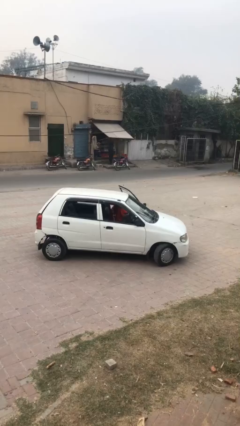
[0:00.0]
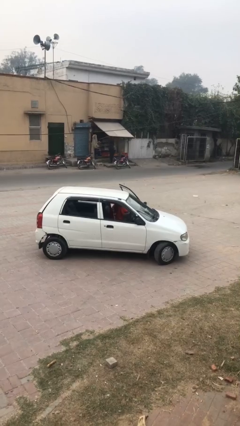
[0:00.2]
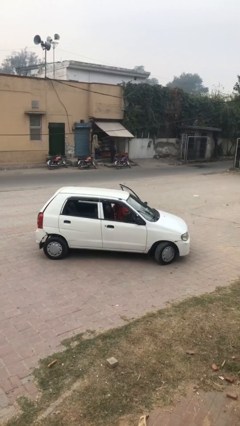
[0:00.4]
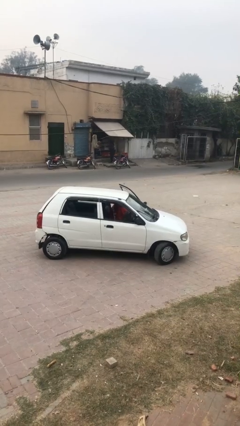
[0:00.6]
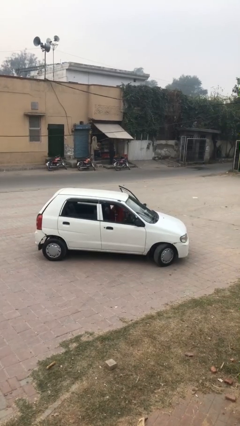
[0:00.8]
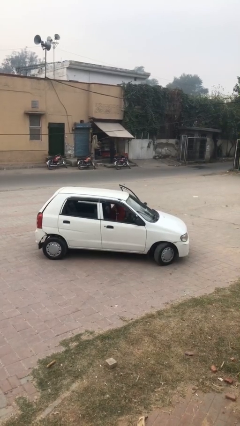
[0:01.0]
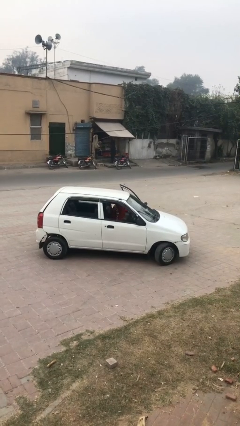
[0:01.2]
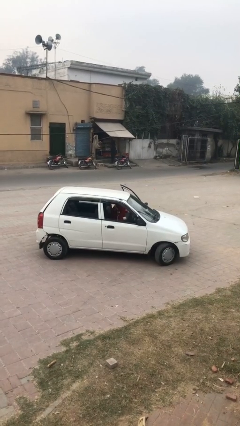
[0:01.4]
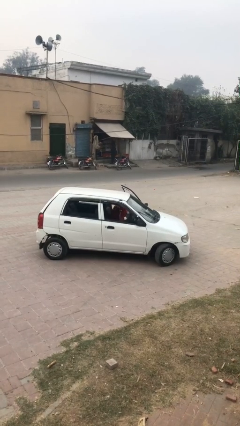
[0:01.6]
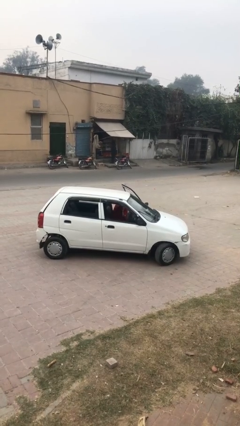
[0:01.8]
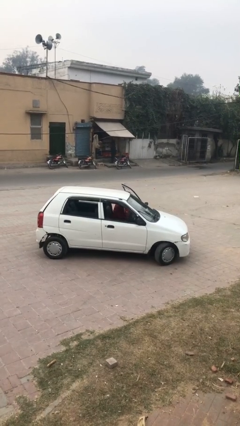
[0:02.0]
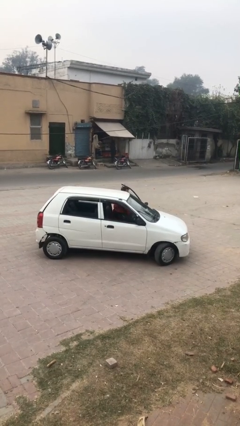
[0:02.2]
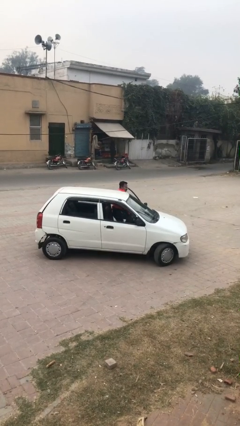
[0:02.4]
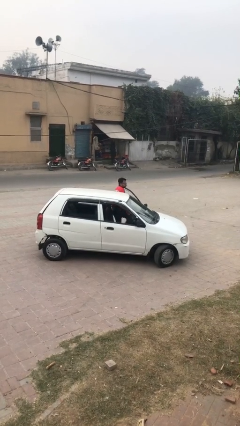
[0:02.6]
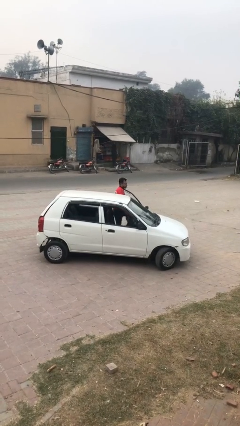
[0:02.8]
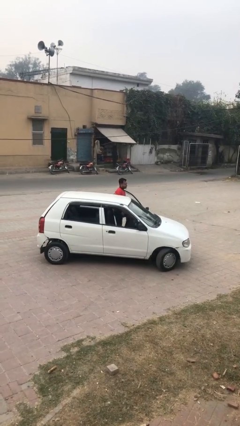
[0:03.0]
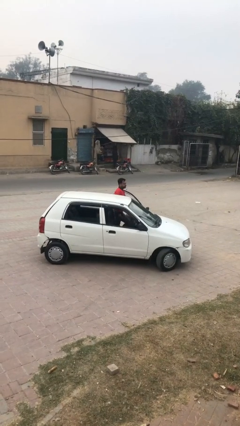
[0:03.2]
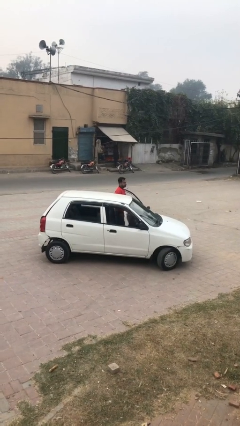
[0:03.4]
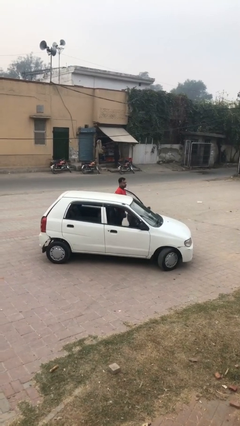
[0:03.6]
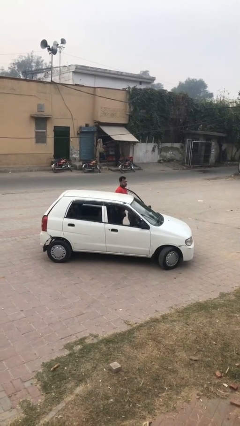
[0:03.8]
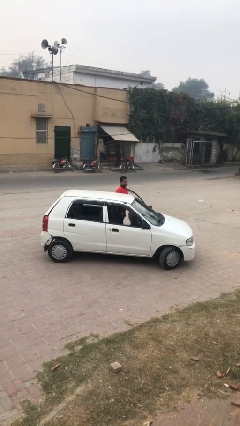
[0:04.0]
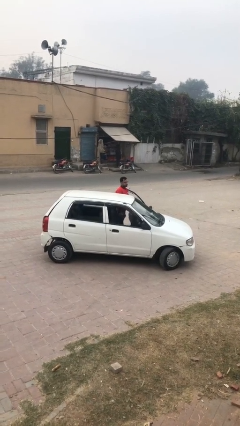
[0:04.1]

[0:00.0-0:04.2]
person exits car

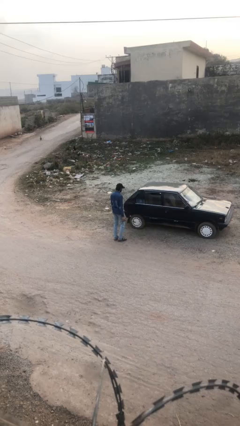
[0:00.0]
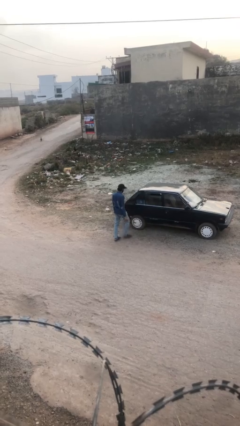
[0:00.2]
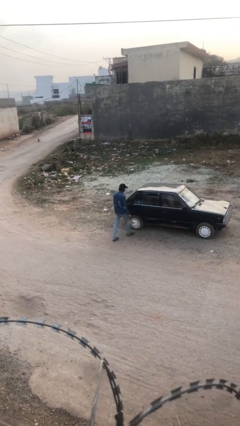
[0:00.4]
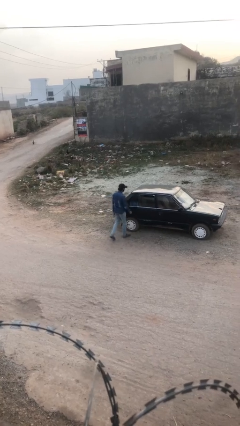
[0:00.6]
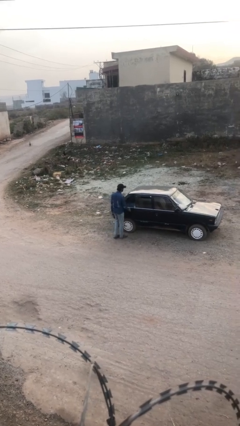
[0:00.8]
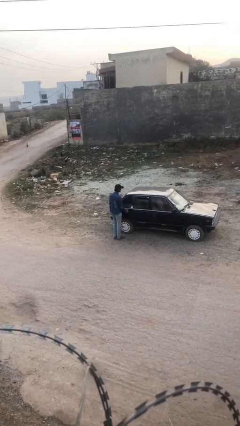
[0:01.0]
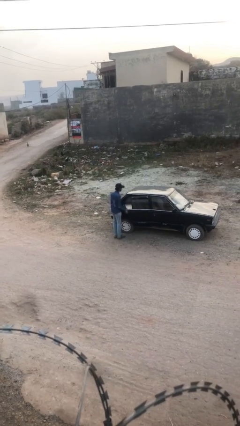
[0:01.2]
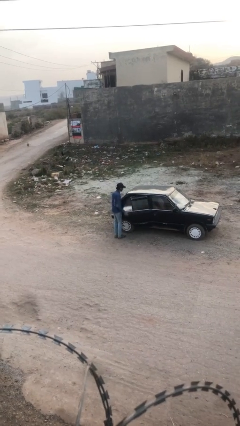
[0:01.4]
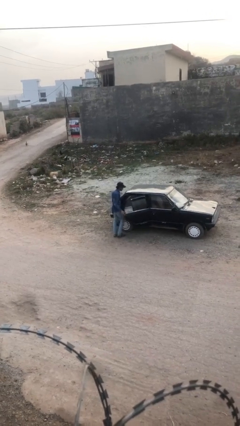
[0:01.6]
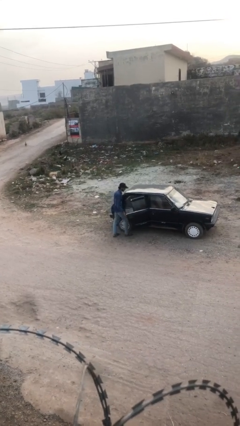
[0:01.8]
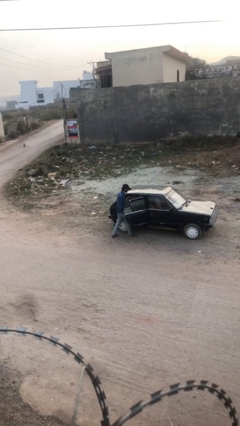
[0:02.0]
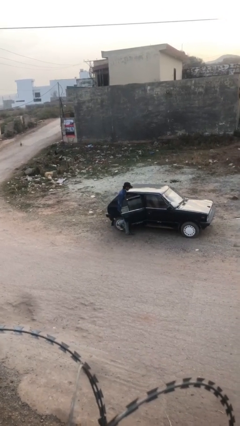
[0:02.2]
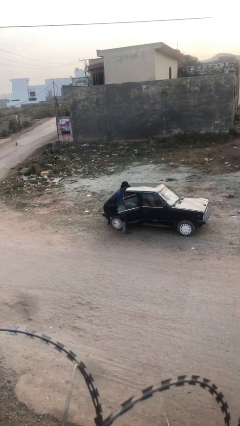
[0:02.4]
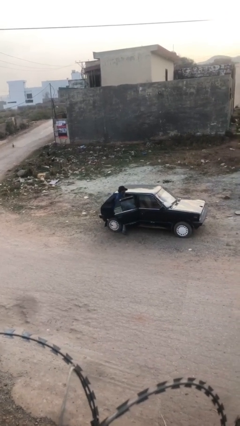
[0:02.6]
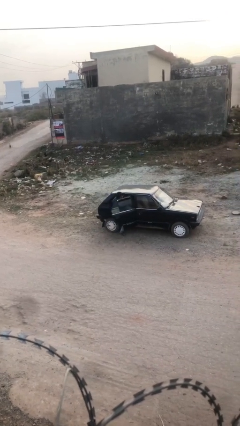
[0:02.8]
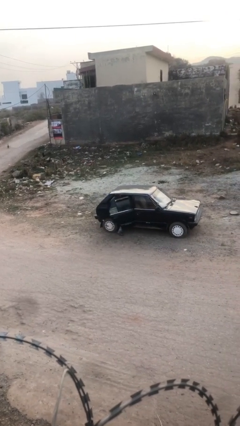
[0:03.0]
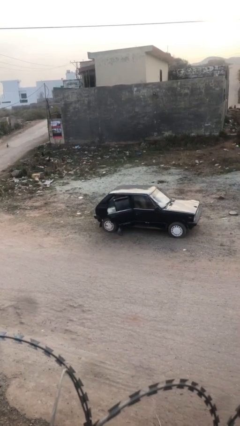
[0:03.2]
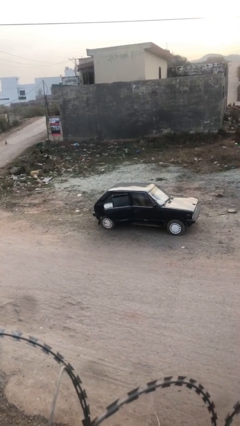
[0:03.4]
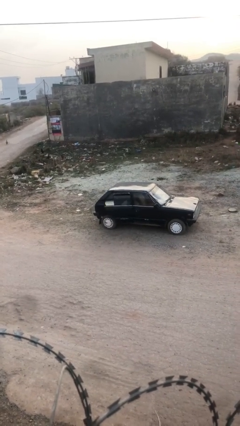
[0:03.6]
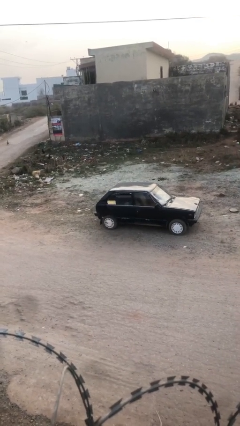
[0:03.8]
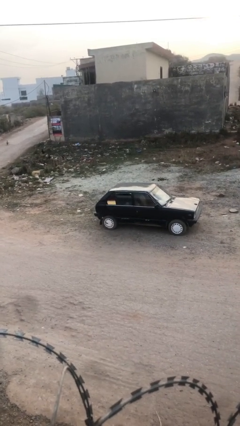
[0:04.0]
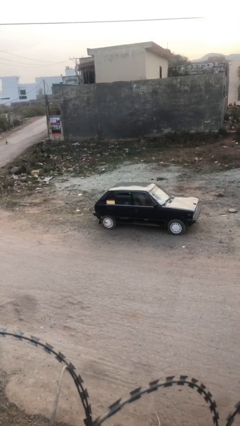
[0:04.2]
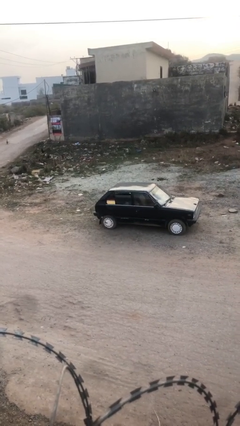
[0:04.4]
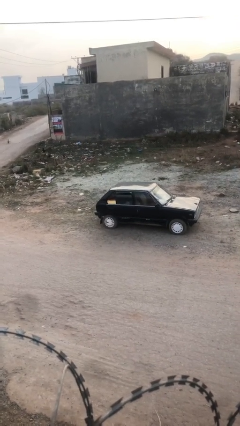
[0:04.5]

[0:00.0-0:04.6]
car picks up person

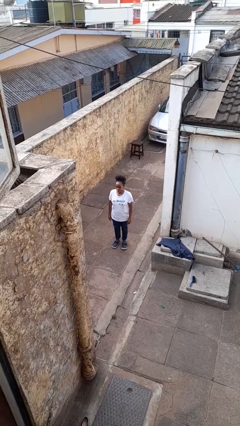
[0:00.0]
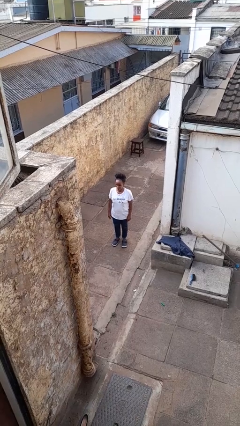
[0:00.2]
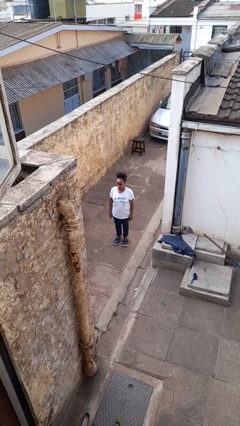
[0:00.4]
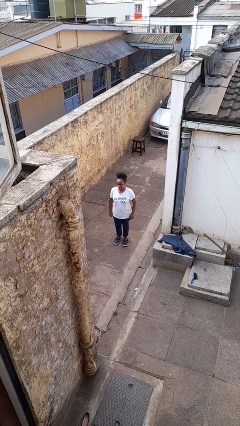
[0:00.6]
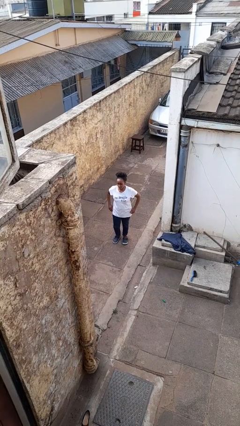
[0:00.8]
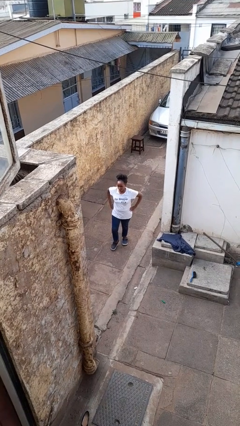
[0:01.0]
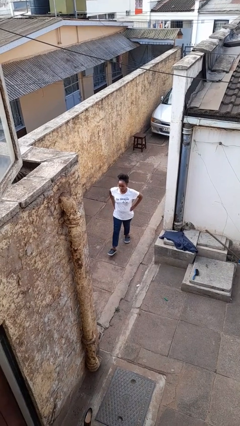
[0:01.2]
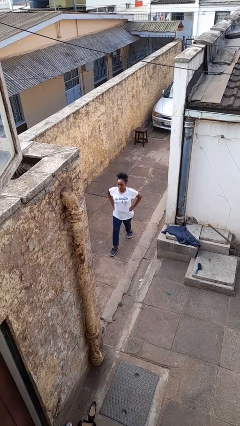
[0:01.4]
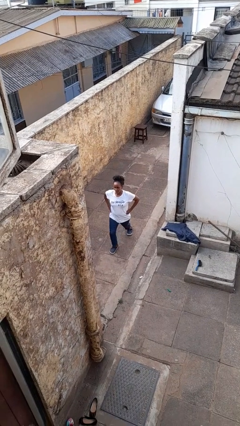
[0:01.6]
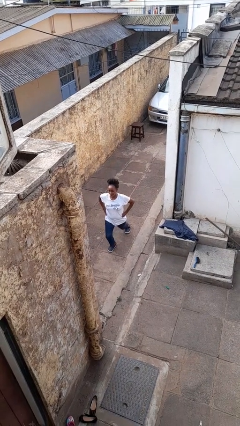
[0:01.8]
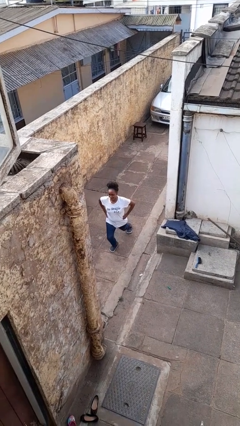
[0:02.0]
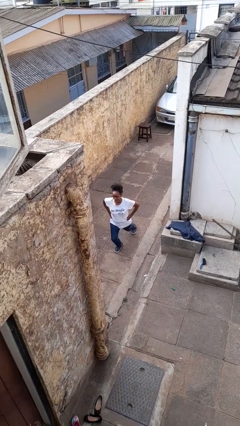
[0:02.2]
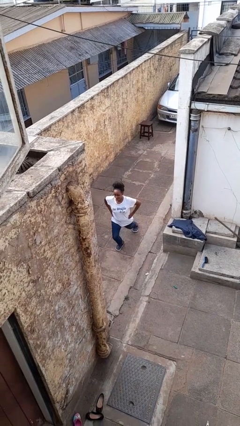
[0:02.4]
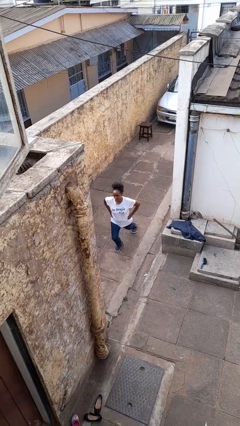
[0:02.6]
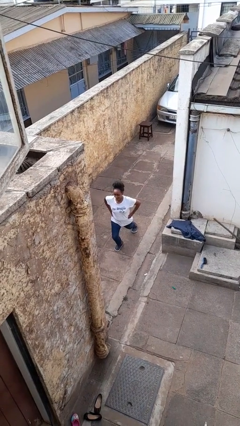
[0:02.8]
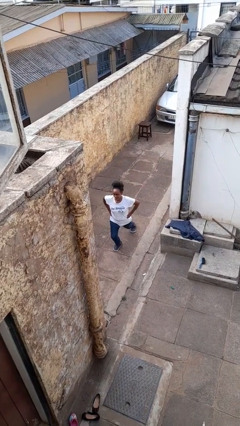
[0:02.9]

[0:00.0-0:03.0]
person exercises with lunges

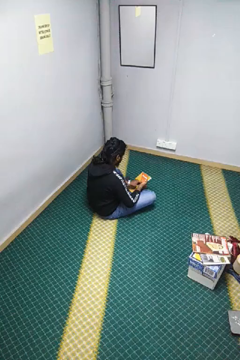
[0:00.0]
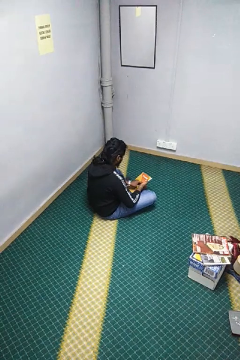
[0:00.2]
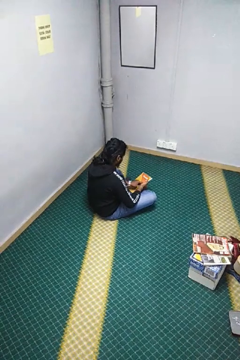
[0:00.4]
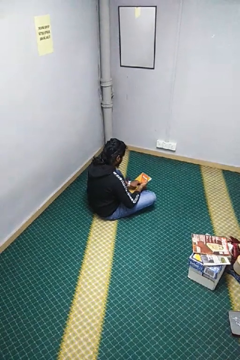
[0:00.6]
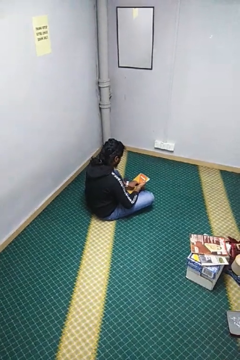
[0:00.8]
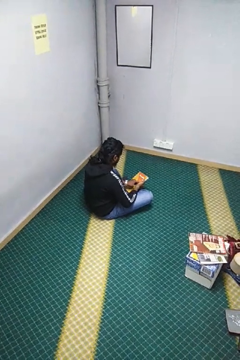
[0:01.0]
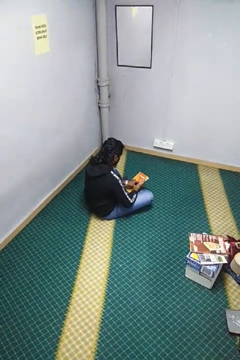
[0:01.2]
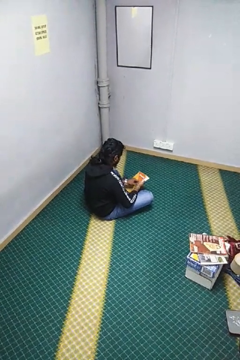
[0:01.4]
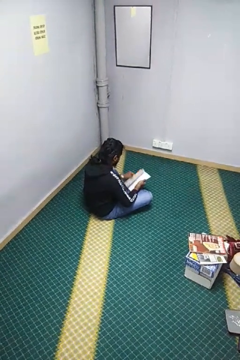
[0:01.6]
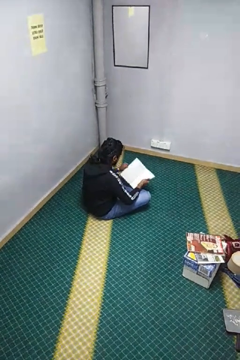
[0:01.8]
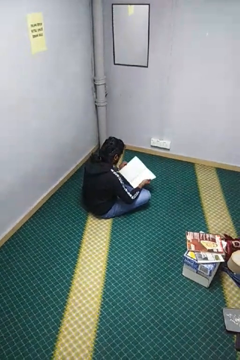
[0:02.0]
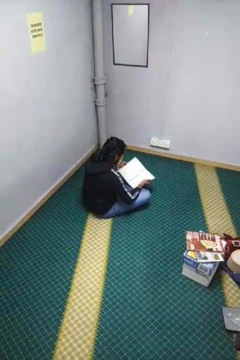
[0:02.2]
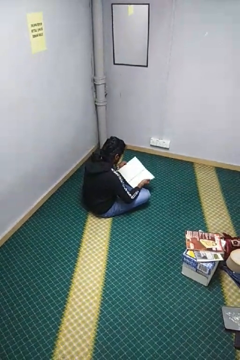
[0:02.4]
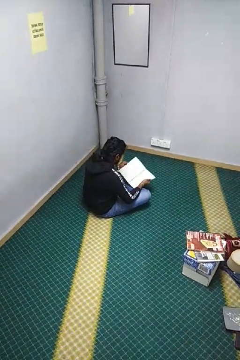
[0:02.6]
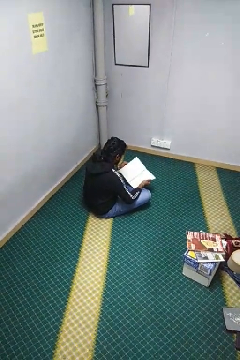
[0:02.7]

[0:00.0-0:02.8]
person reads book

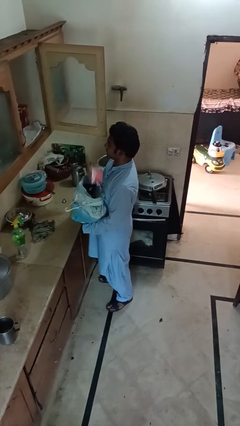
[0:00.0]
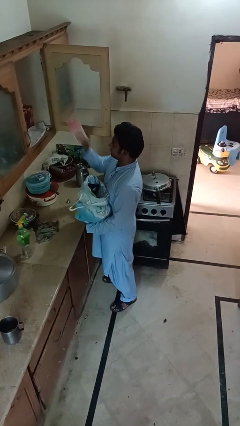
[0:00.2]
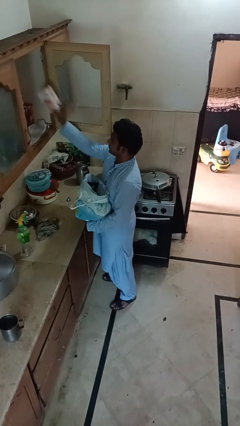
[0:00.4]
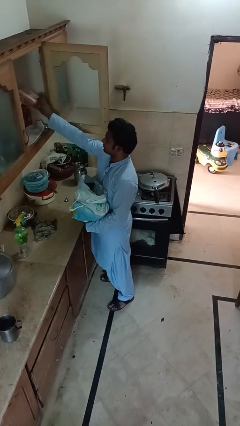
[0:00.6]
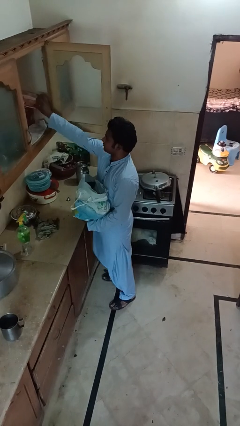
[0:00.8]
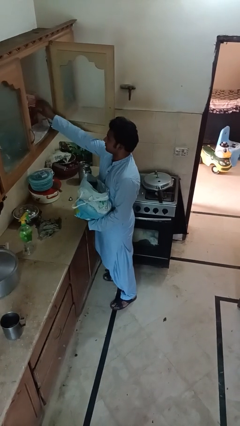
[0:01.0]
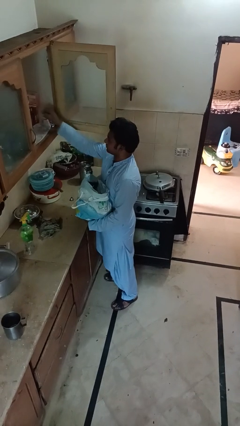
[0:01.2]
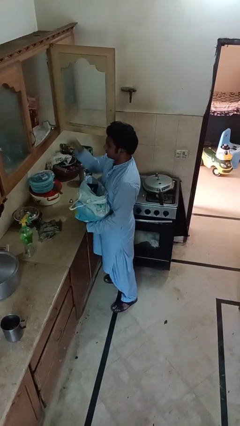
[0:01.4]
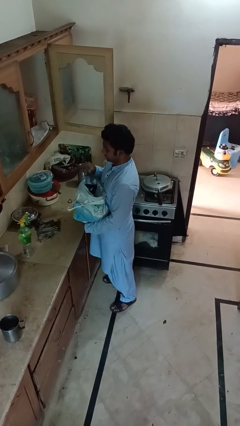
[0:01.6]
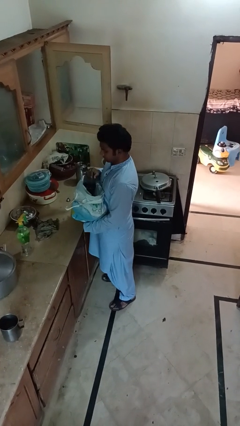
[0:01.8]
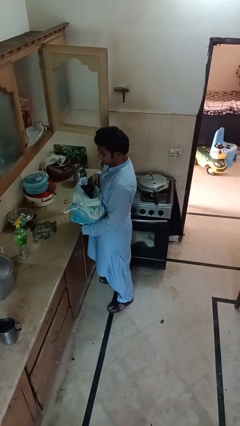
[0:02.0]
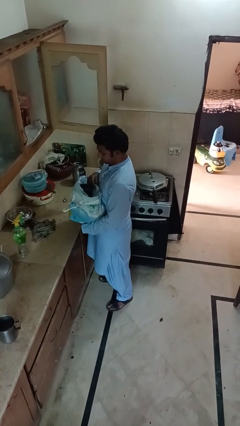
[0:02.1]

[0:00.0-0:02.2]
person loads groceries into cabinet

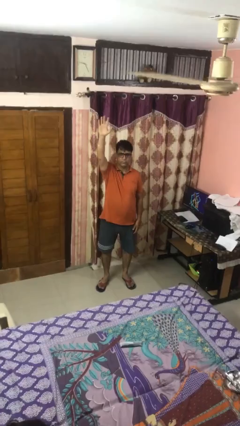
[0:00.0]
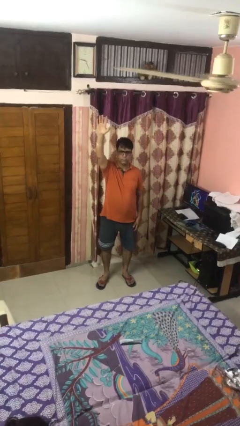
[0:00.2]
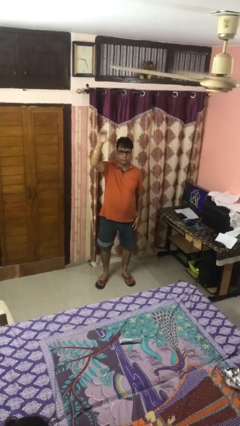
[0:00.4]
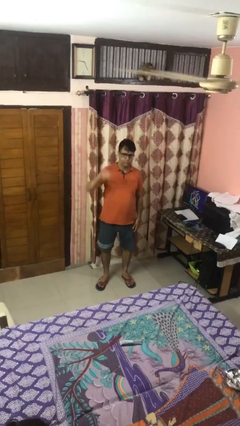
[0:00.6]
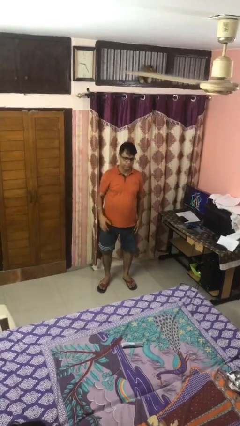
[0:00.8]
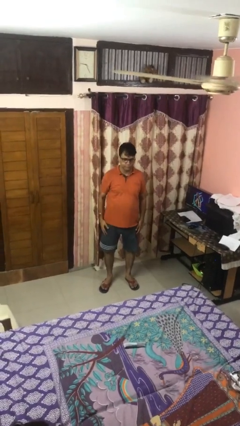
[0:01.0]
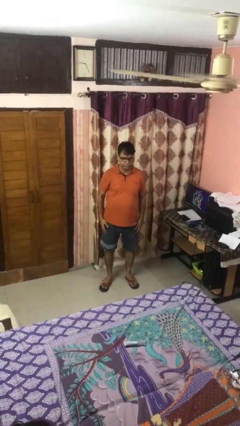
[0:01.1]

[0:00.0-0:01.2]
person gestures lower hand
